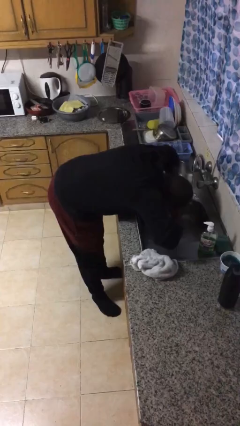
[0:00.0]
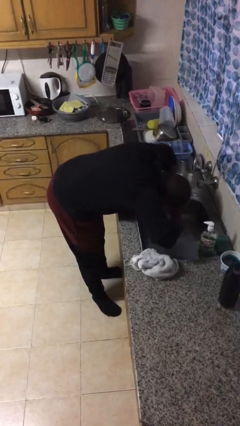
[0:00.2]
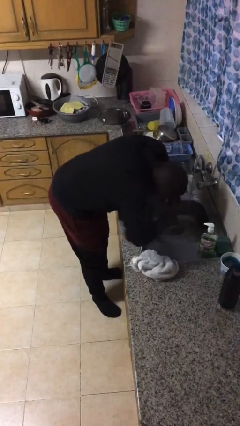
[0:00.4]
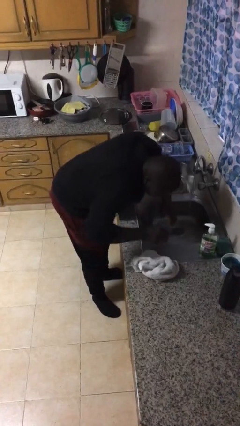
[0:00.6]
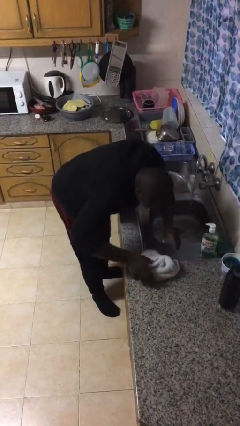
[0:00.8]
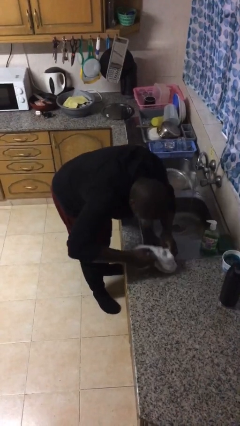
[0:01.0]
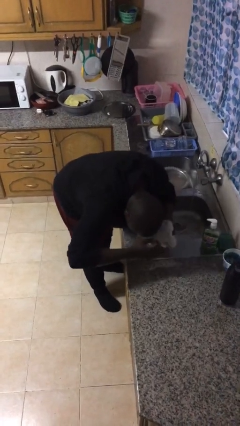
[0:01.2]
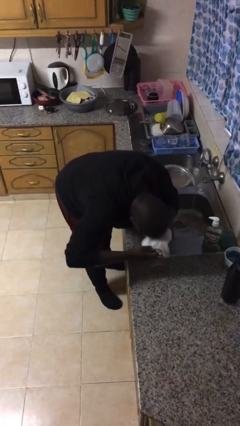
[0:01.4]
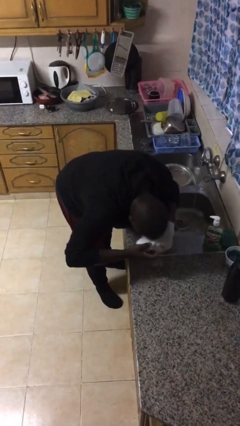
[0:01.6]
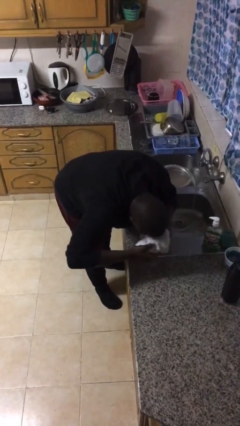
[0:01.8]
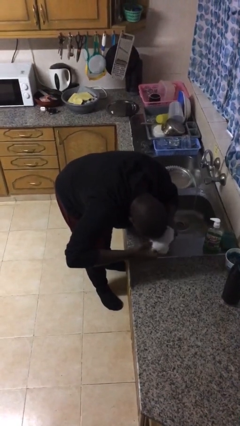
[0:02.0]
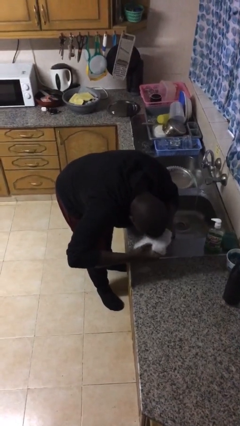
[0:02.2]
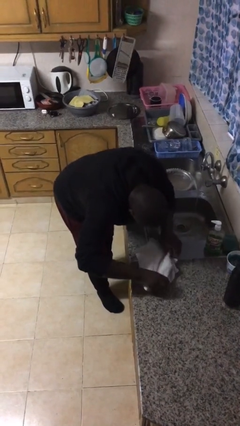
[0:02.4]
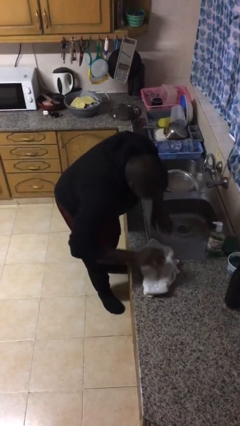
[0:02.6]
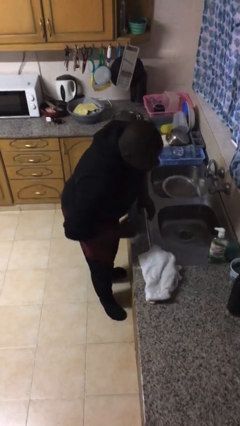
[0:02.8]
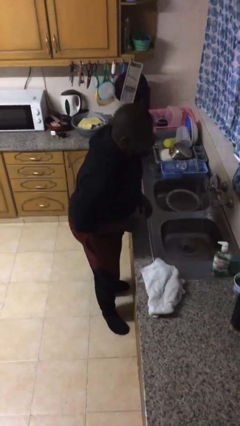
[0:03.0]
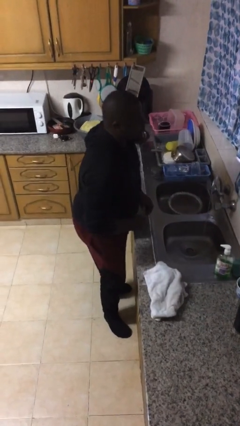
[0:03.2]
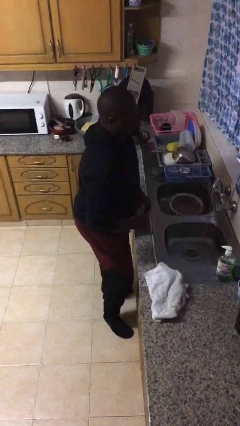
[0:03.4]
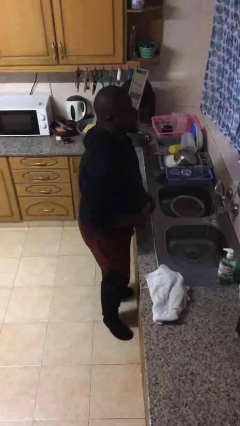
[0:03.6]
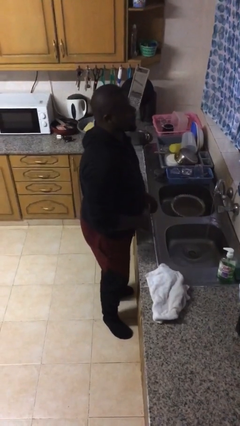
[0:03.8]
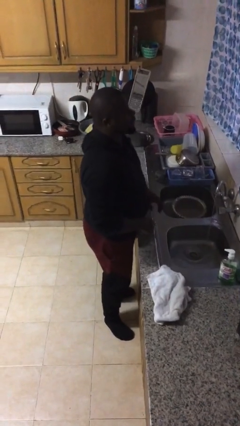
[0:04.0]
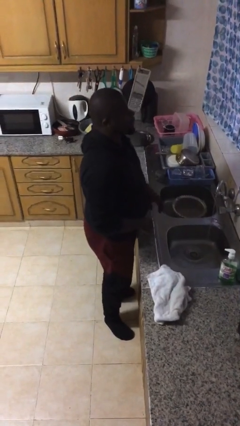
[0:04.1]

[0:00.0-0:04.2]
person dries face with towel

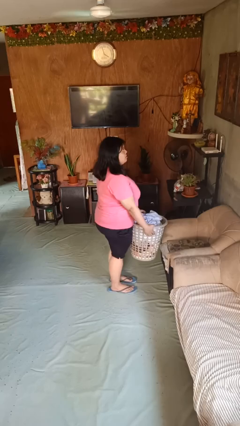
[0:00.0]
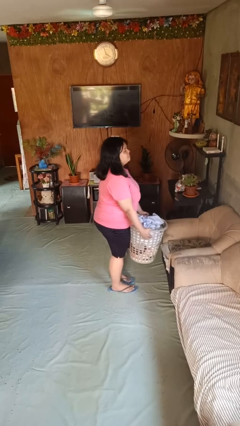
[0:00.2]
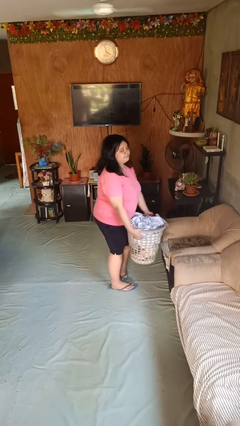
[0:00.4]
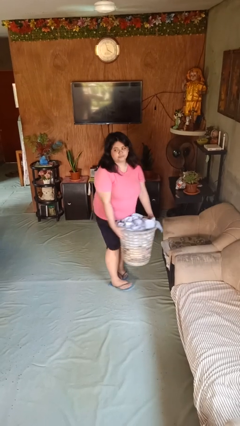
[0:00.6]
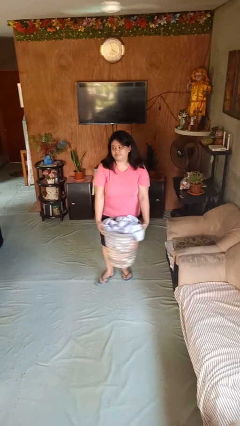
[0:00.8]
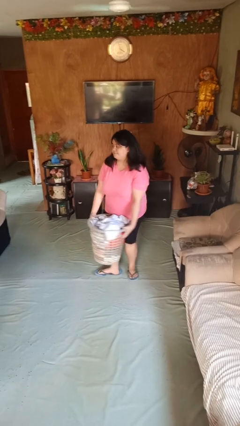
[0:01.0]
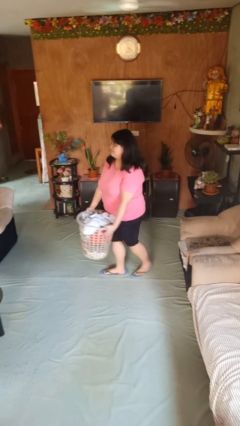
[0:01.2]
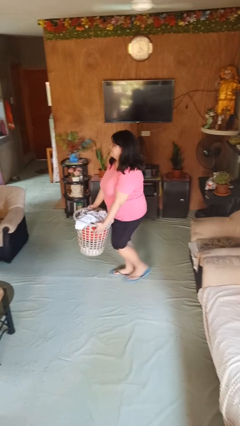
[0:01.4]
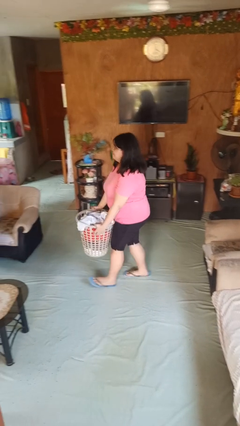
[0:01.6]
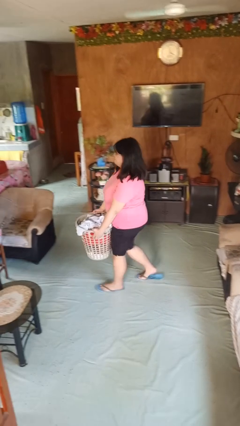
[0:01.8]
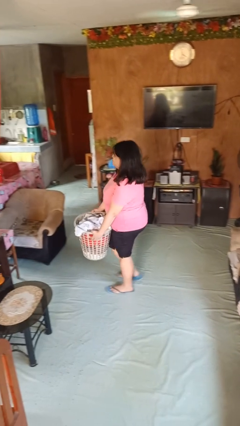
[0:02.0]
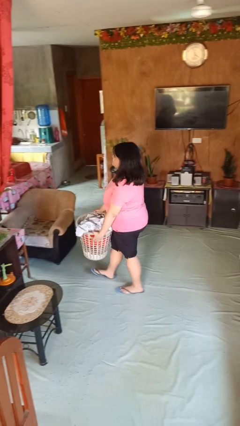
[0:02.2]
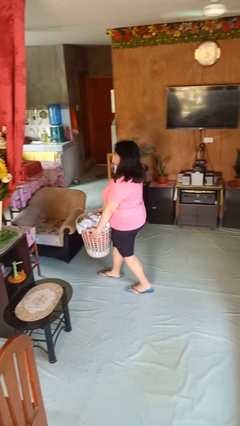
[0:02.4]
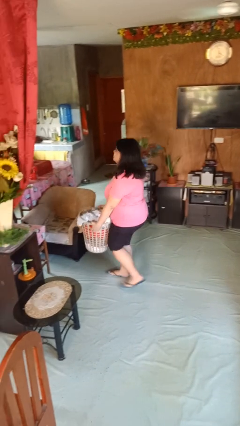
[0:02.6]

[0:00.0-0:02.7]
person carries laundry basket

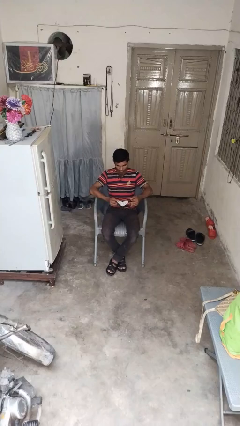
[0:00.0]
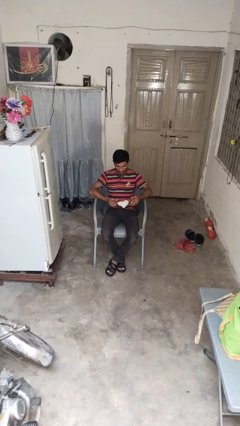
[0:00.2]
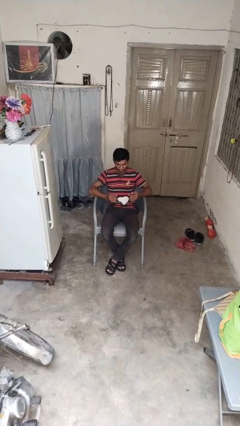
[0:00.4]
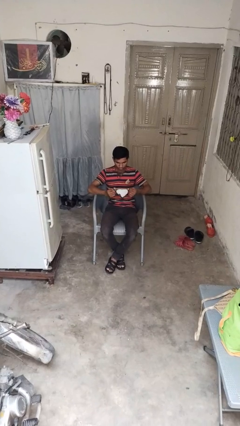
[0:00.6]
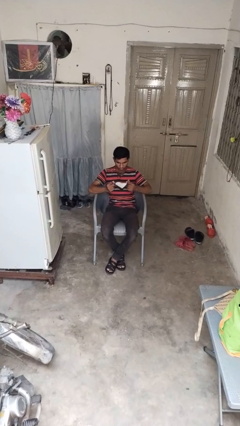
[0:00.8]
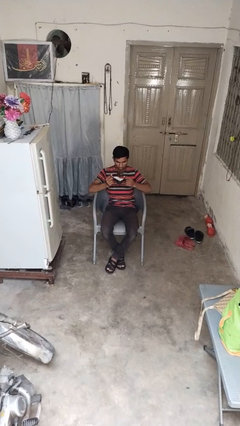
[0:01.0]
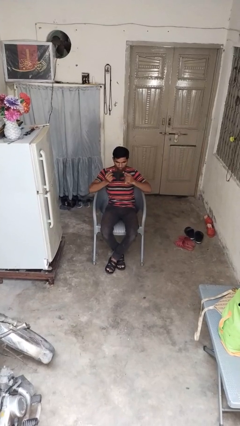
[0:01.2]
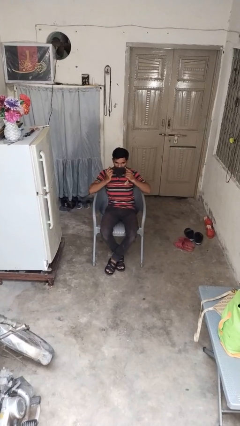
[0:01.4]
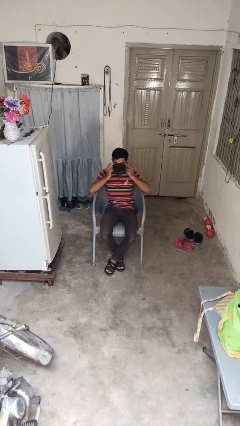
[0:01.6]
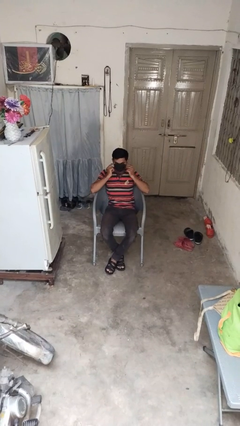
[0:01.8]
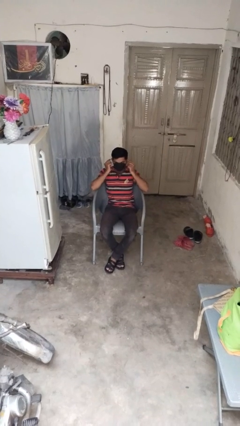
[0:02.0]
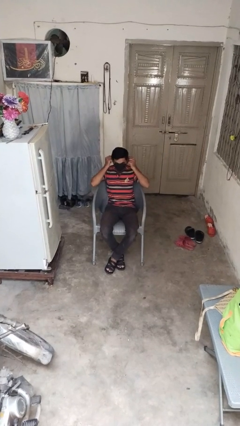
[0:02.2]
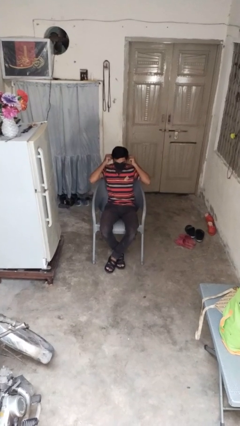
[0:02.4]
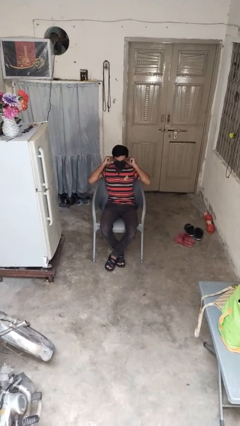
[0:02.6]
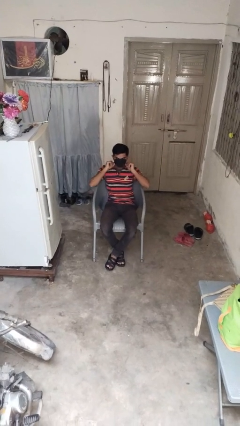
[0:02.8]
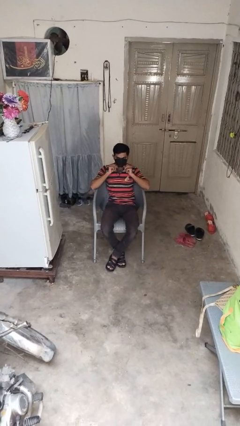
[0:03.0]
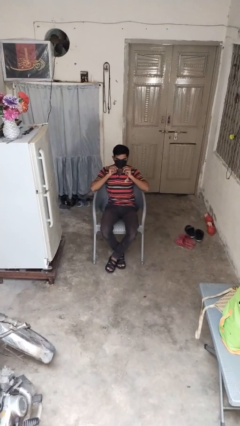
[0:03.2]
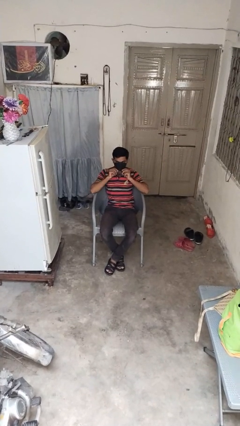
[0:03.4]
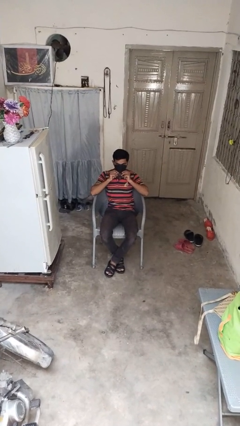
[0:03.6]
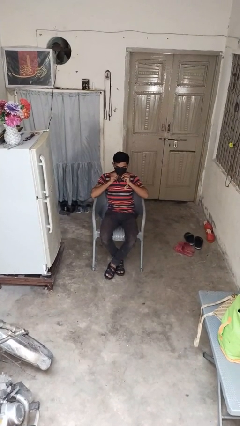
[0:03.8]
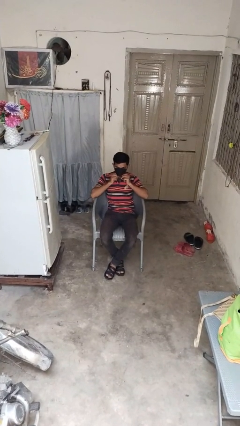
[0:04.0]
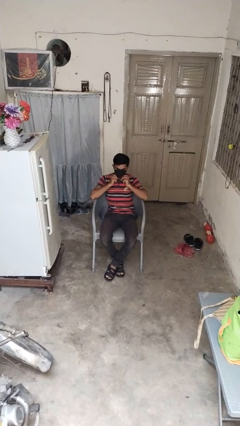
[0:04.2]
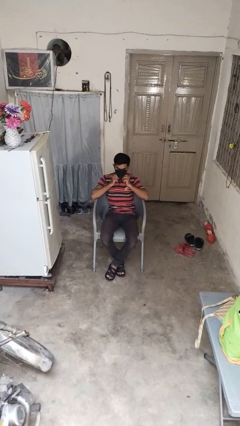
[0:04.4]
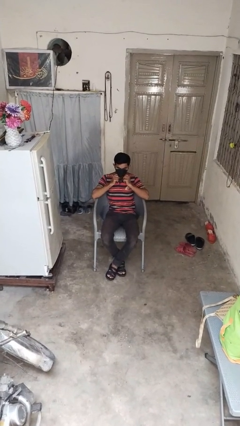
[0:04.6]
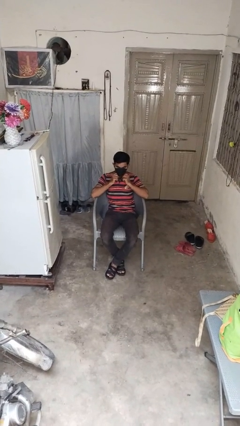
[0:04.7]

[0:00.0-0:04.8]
person puts on facemask

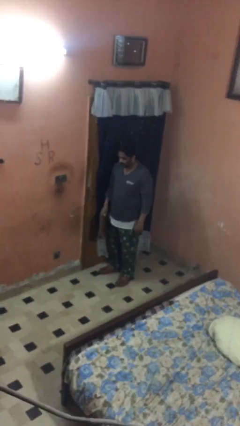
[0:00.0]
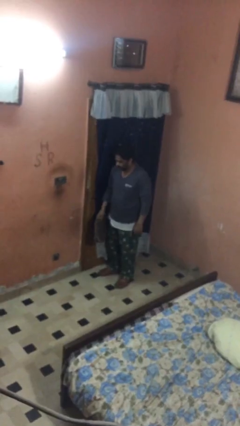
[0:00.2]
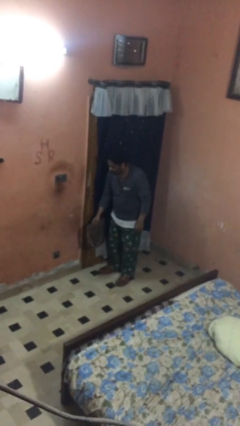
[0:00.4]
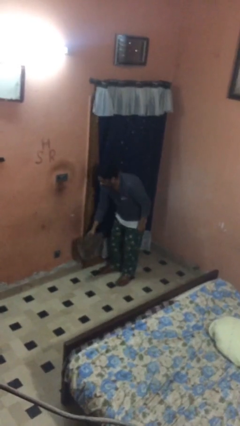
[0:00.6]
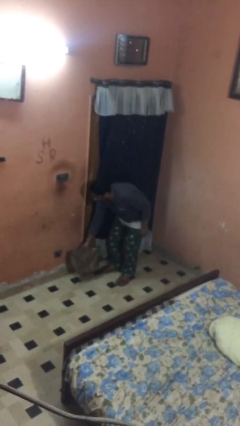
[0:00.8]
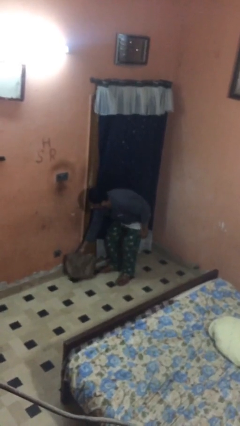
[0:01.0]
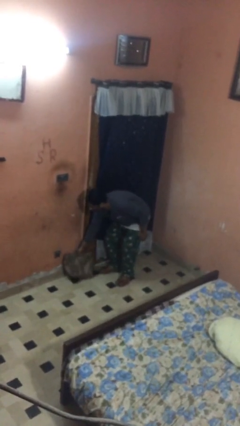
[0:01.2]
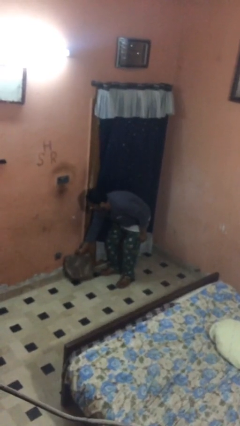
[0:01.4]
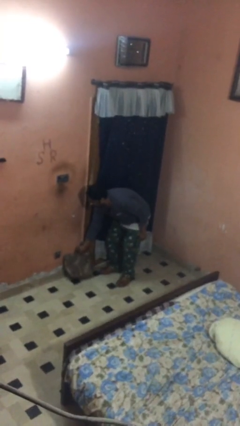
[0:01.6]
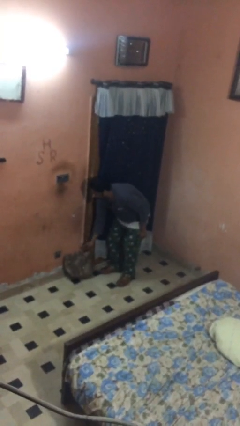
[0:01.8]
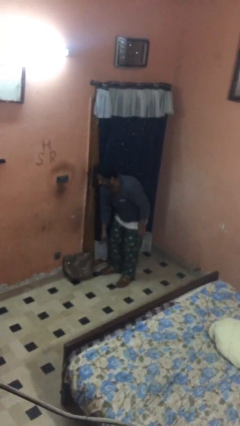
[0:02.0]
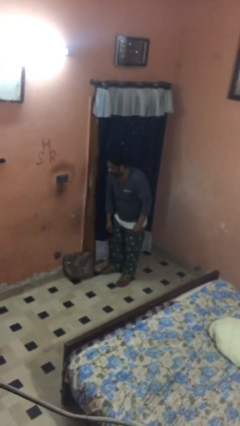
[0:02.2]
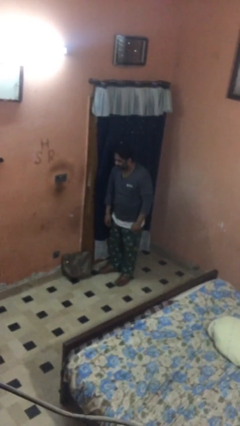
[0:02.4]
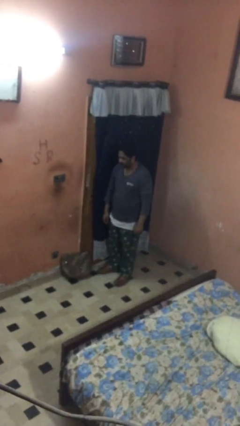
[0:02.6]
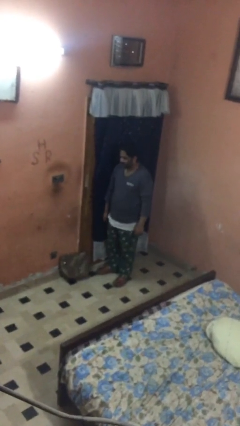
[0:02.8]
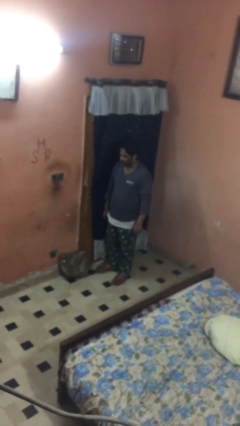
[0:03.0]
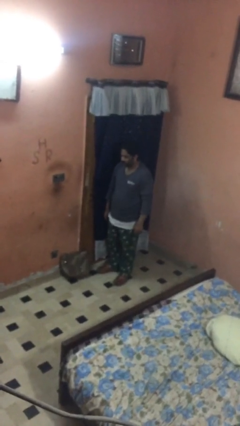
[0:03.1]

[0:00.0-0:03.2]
person puts down object on floor

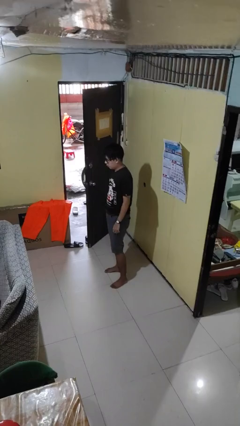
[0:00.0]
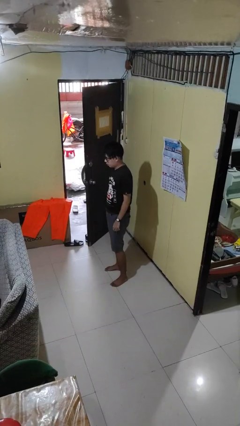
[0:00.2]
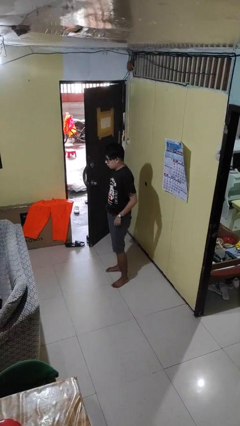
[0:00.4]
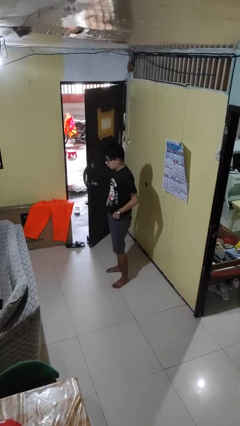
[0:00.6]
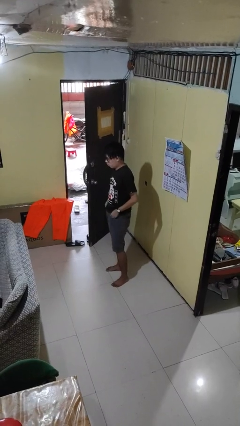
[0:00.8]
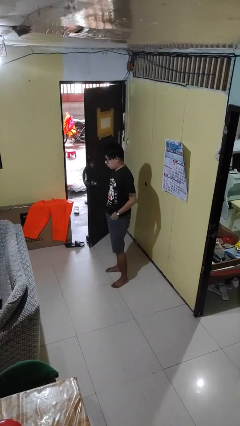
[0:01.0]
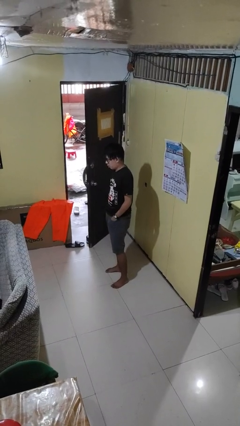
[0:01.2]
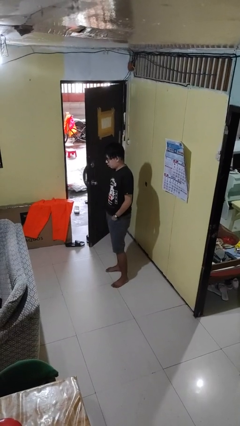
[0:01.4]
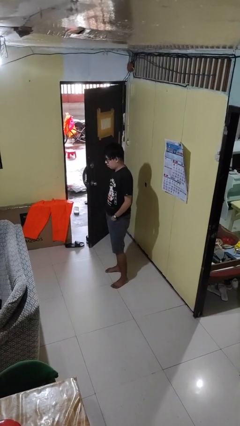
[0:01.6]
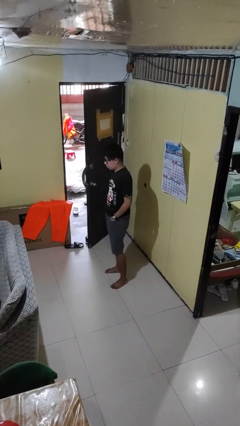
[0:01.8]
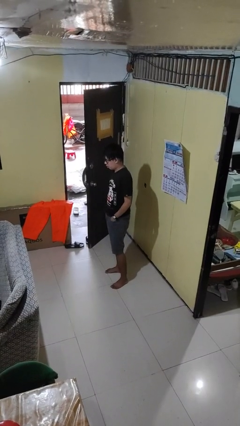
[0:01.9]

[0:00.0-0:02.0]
person puts hands in back pockets

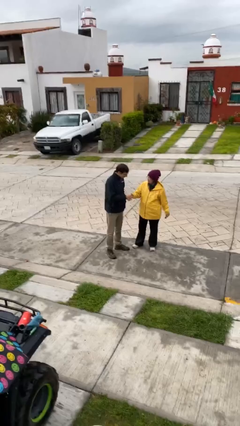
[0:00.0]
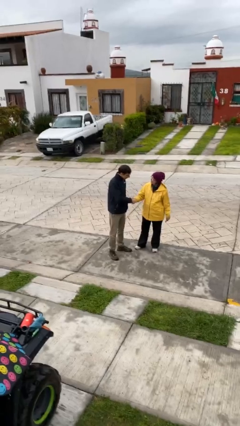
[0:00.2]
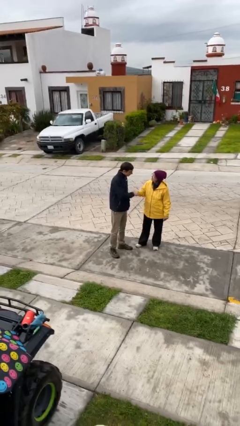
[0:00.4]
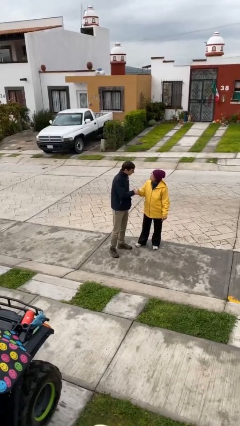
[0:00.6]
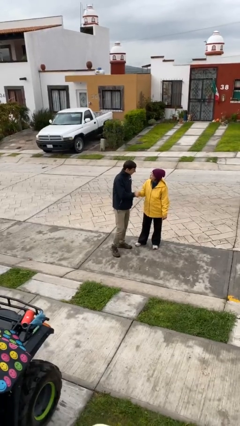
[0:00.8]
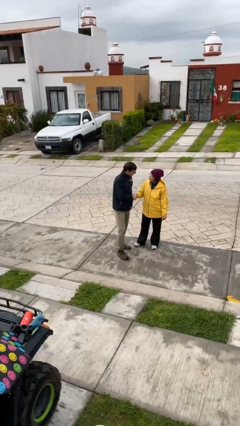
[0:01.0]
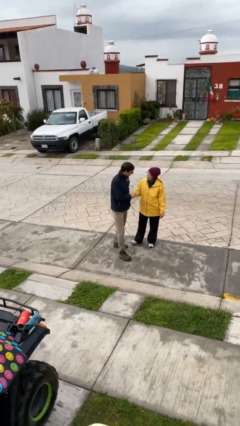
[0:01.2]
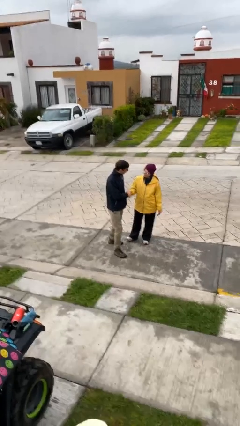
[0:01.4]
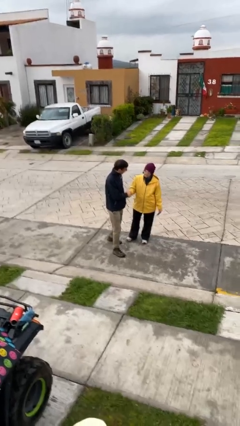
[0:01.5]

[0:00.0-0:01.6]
person shakes hand
